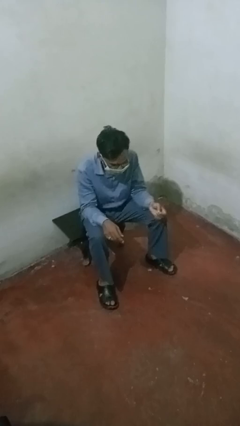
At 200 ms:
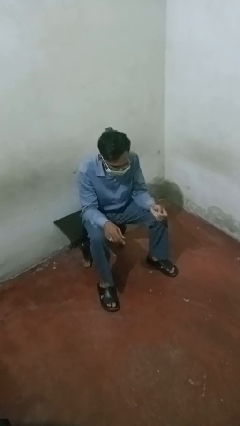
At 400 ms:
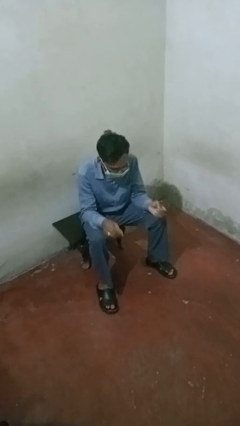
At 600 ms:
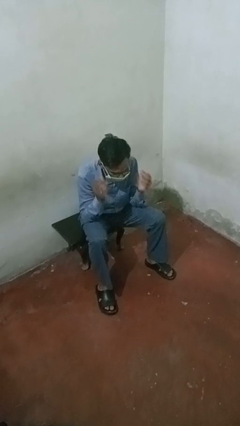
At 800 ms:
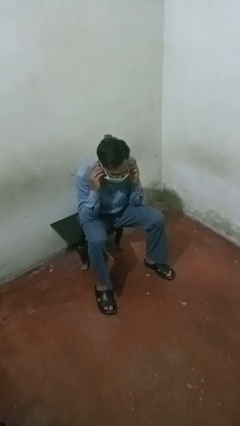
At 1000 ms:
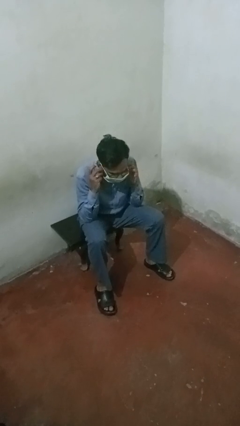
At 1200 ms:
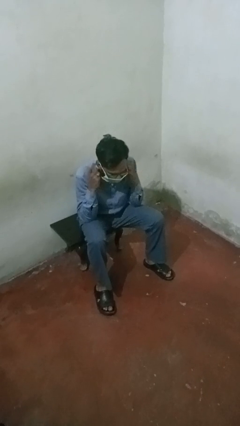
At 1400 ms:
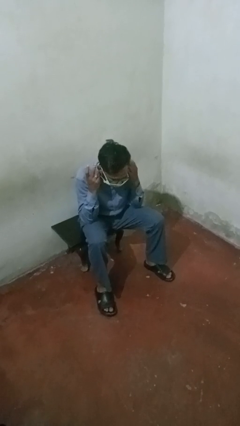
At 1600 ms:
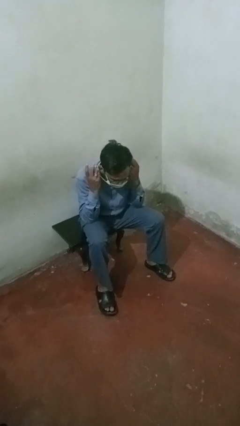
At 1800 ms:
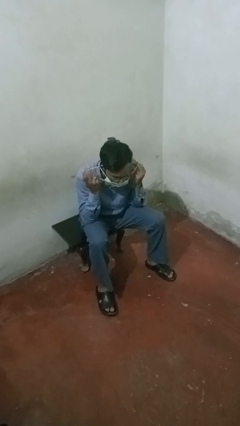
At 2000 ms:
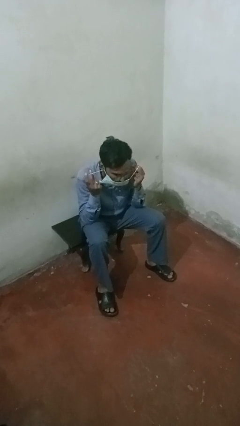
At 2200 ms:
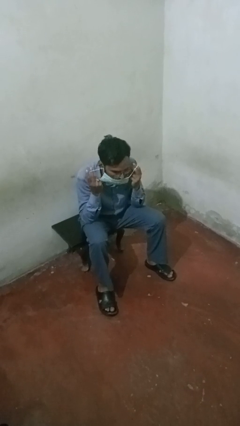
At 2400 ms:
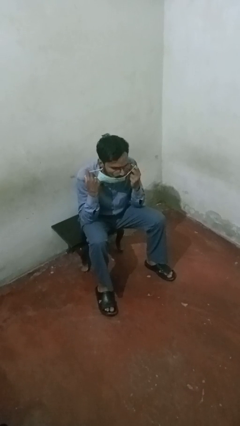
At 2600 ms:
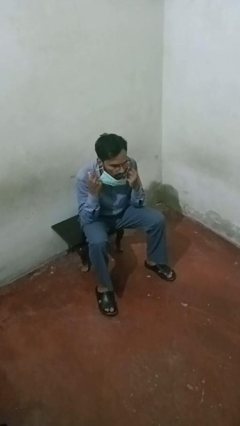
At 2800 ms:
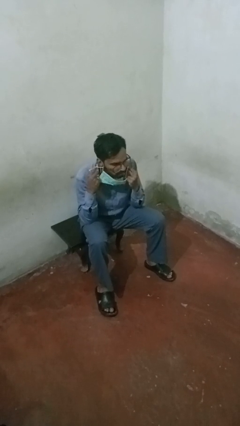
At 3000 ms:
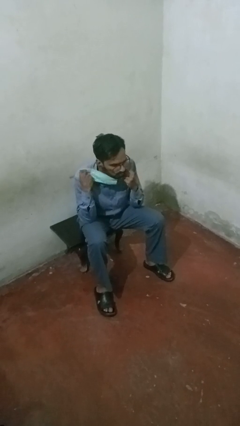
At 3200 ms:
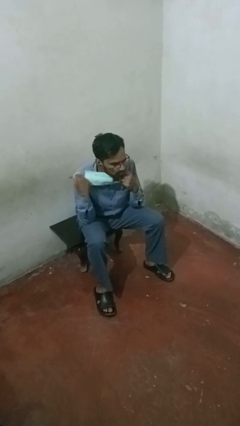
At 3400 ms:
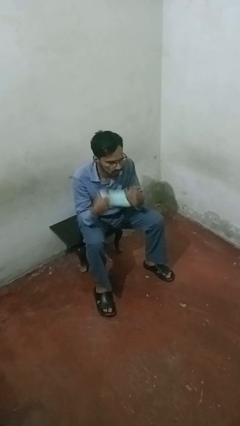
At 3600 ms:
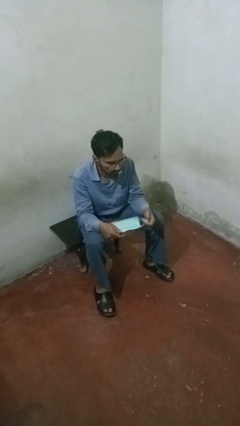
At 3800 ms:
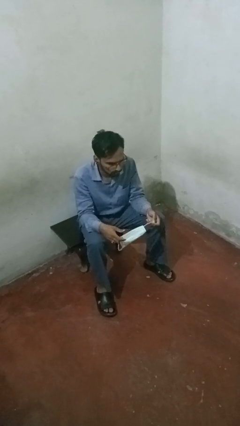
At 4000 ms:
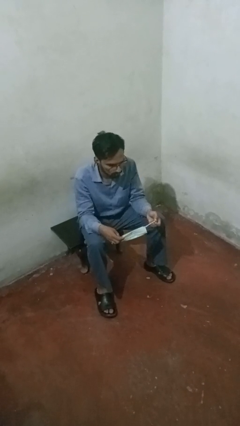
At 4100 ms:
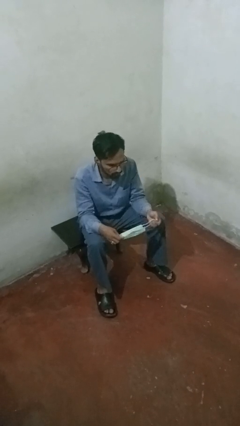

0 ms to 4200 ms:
person takes off facemask

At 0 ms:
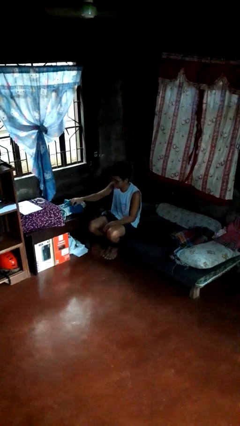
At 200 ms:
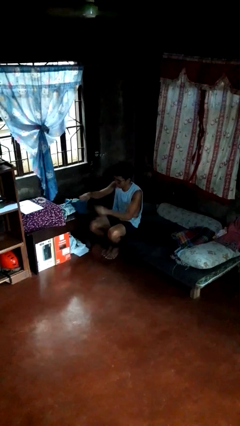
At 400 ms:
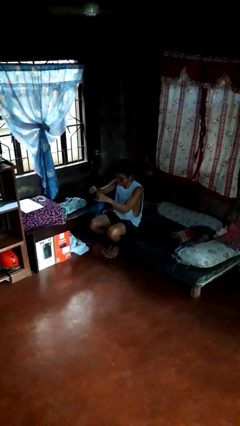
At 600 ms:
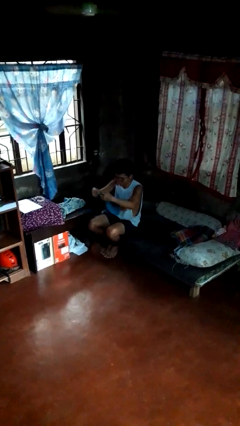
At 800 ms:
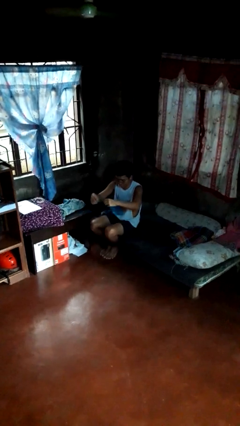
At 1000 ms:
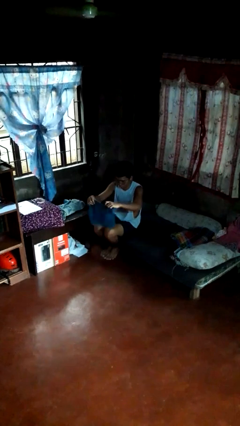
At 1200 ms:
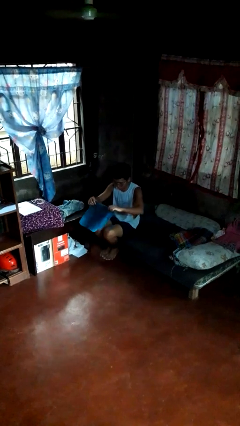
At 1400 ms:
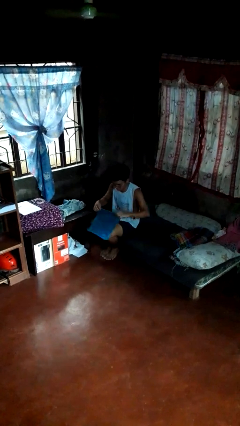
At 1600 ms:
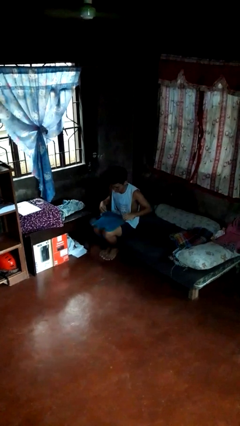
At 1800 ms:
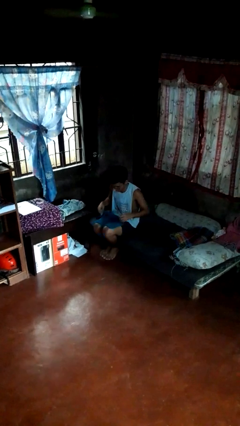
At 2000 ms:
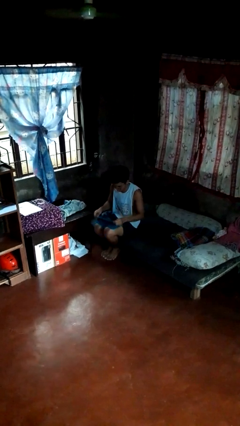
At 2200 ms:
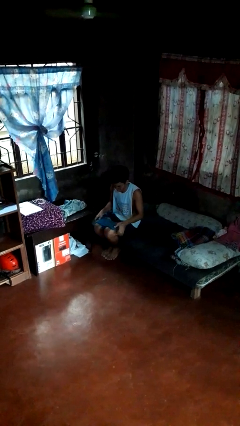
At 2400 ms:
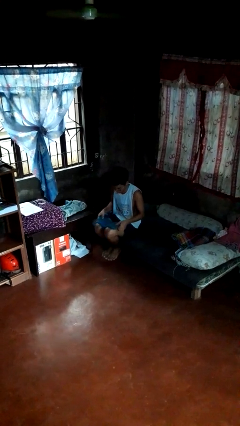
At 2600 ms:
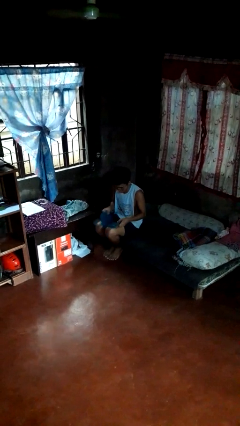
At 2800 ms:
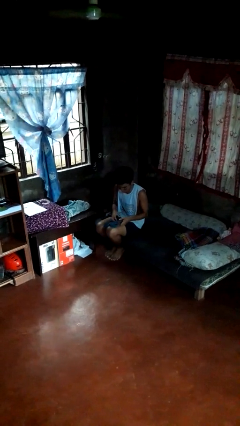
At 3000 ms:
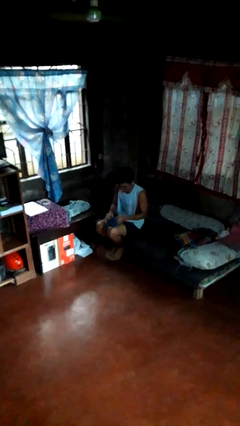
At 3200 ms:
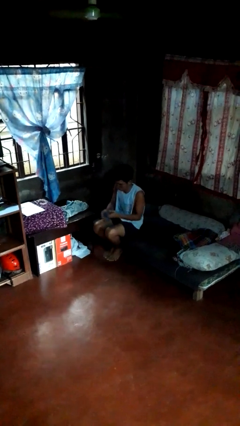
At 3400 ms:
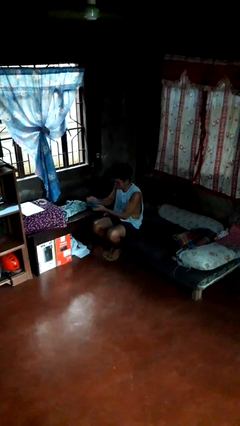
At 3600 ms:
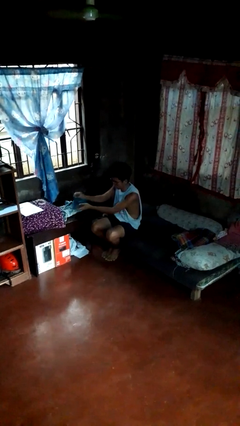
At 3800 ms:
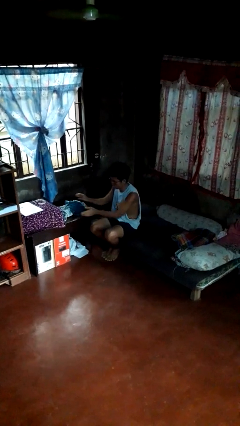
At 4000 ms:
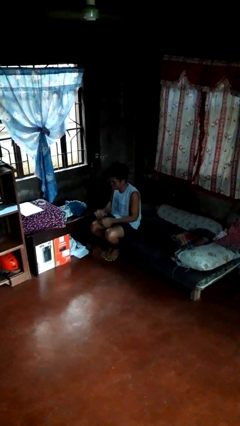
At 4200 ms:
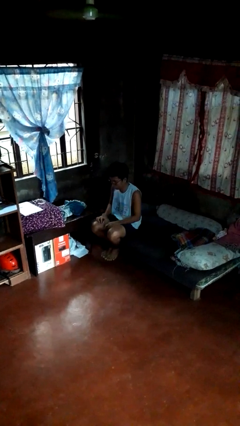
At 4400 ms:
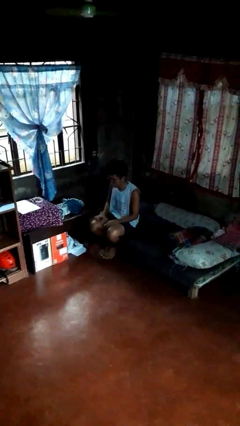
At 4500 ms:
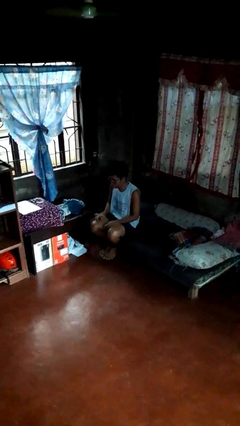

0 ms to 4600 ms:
person folds towel

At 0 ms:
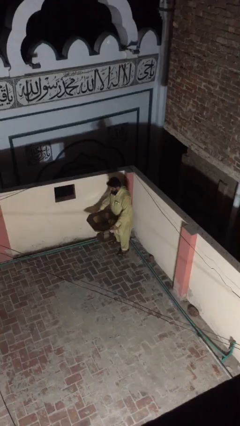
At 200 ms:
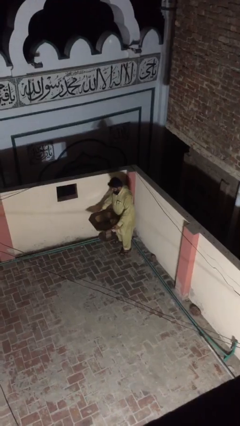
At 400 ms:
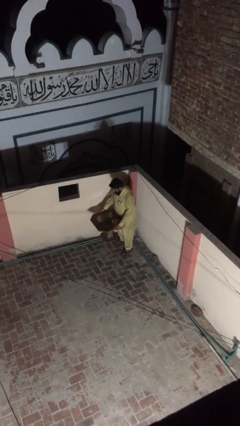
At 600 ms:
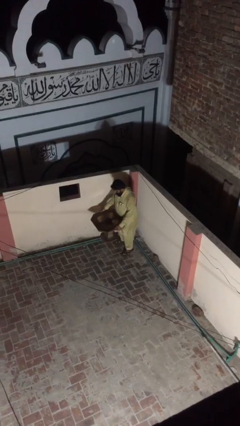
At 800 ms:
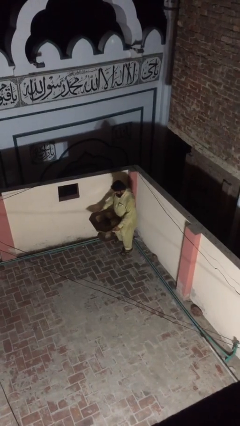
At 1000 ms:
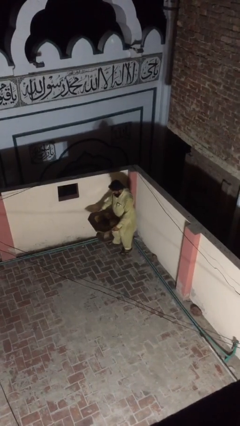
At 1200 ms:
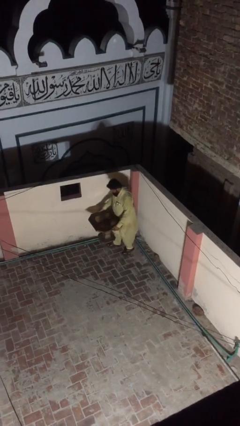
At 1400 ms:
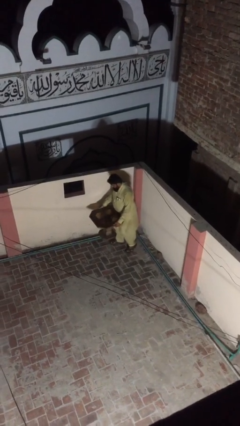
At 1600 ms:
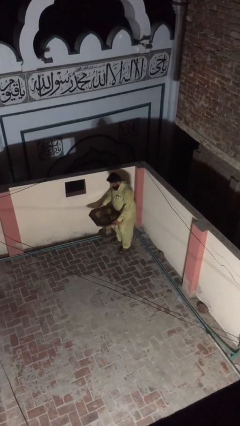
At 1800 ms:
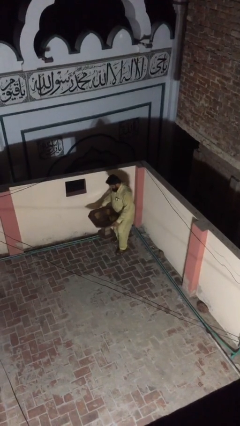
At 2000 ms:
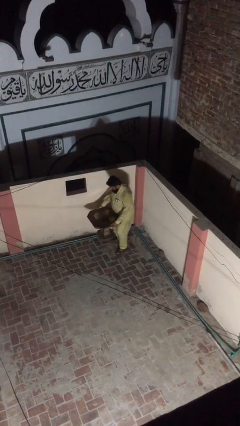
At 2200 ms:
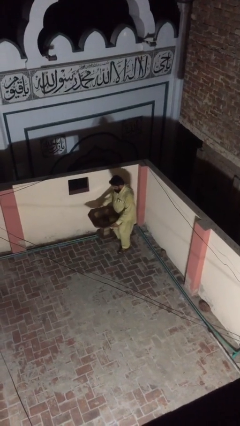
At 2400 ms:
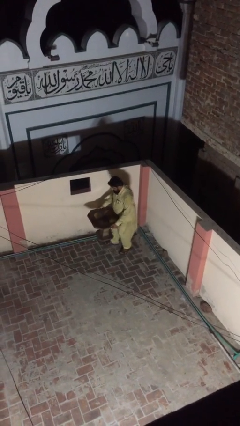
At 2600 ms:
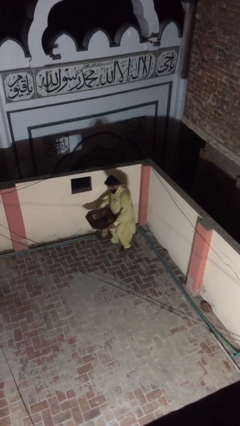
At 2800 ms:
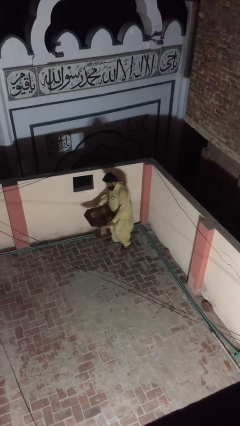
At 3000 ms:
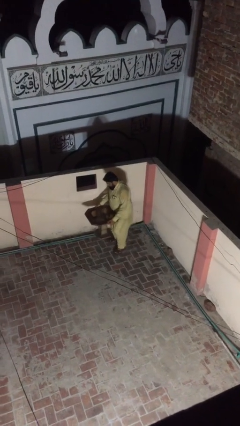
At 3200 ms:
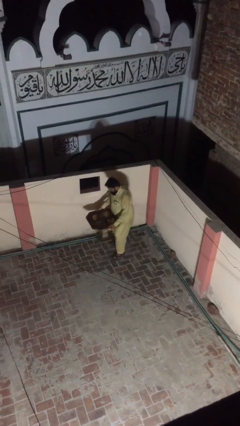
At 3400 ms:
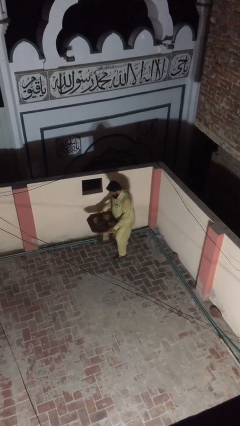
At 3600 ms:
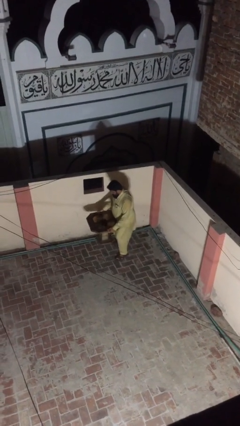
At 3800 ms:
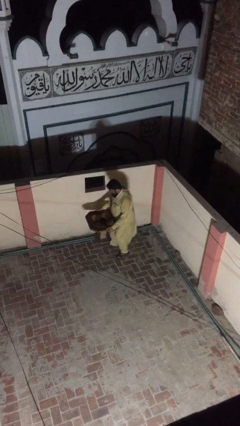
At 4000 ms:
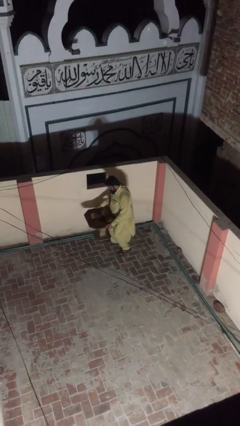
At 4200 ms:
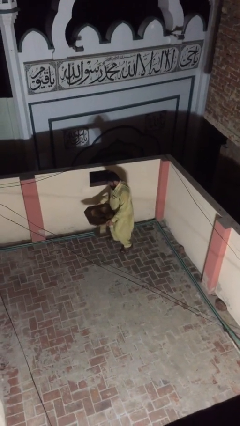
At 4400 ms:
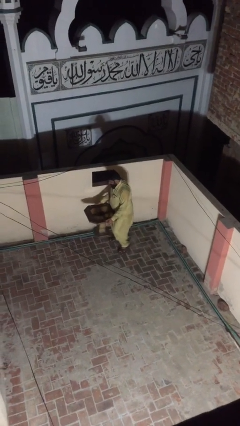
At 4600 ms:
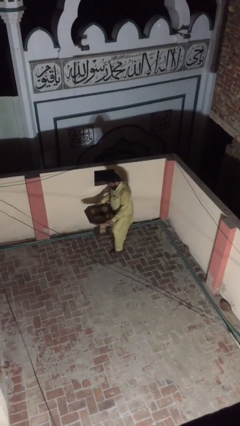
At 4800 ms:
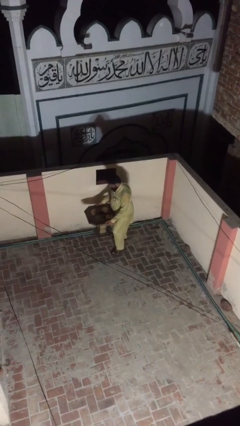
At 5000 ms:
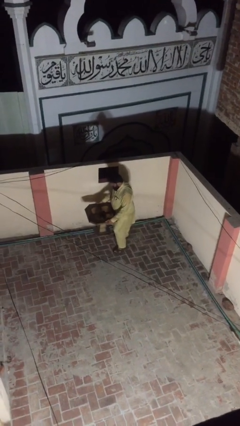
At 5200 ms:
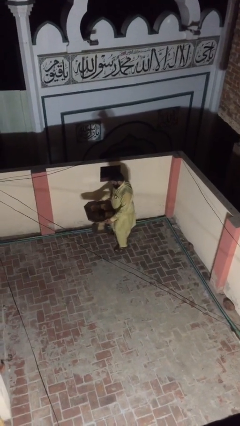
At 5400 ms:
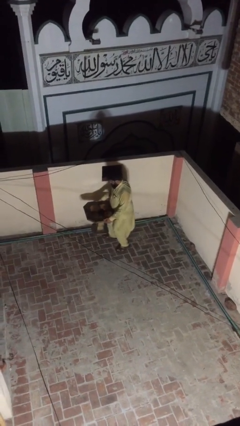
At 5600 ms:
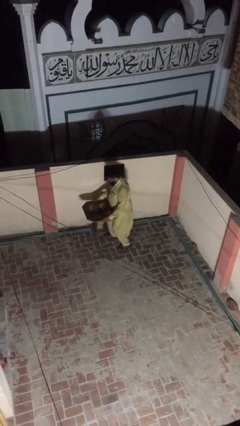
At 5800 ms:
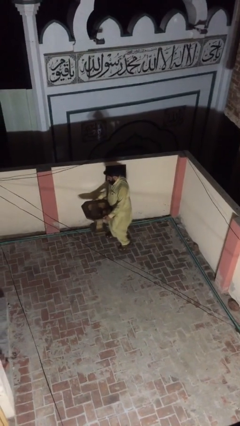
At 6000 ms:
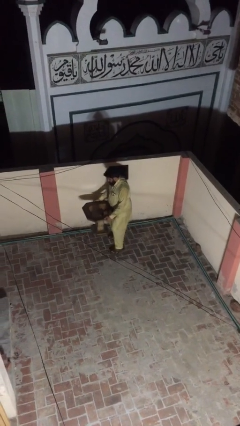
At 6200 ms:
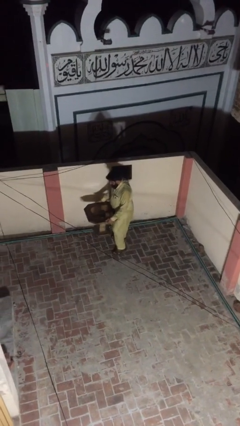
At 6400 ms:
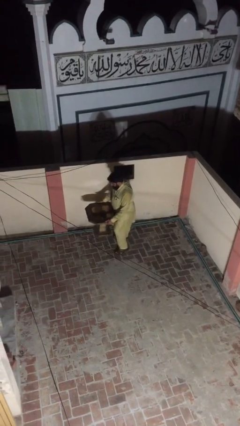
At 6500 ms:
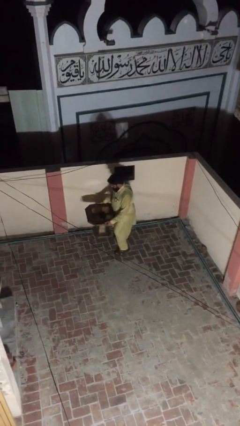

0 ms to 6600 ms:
person carries heavy object

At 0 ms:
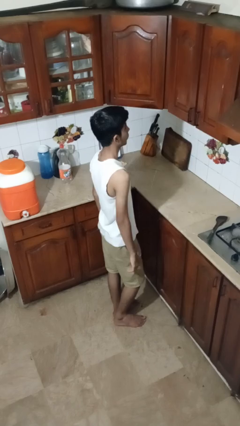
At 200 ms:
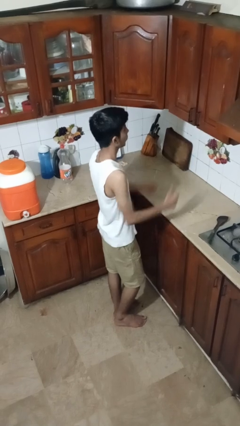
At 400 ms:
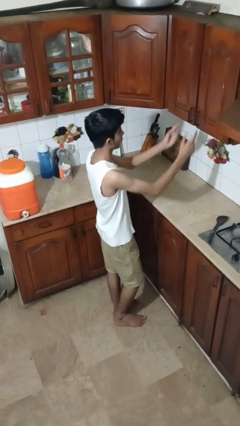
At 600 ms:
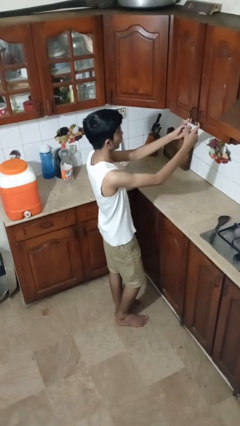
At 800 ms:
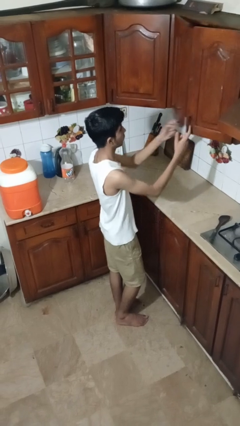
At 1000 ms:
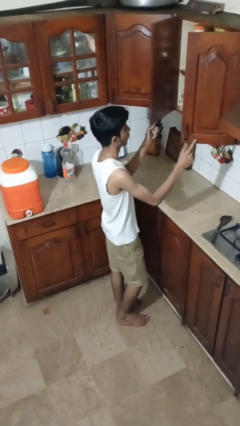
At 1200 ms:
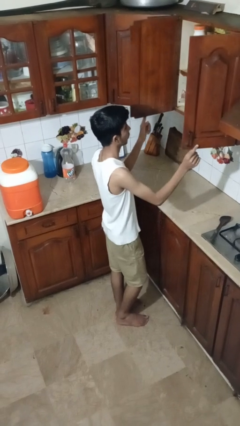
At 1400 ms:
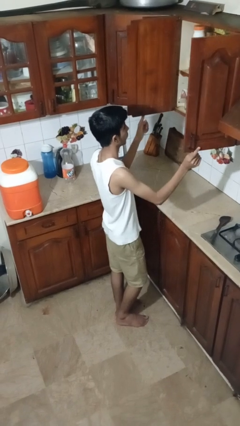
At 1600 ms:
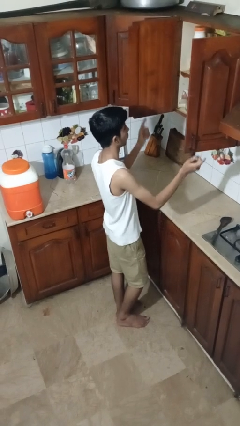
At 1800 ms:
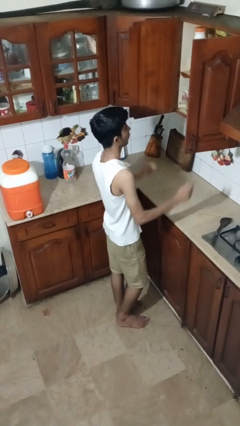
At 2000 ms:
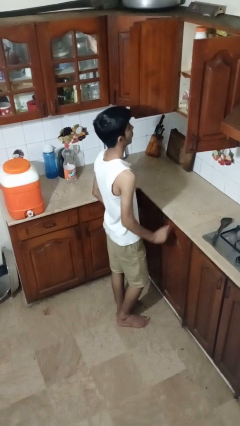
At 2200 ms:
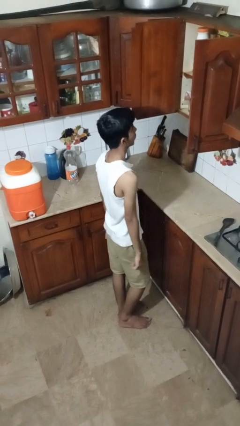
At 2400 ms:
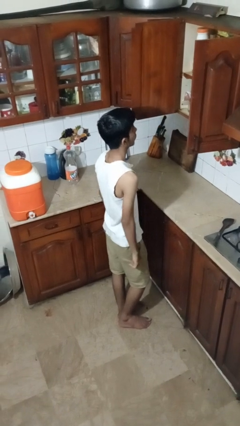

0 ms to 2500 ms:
person opens cabinet
